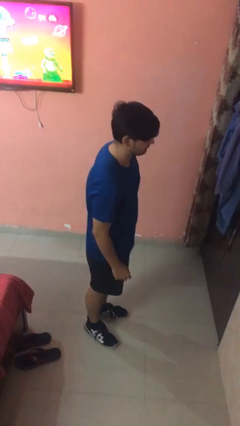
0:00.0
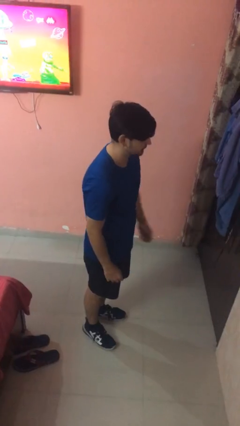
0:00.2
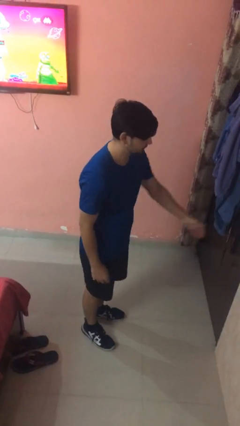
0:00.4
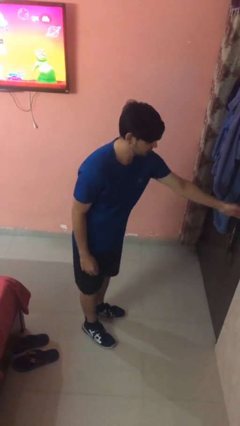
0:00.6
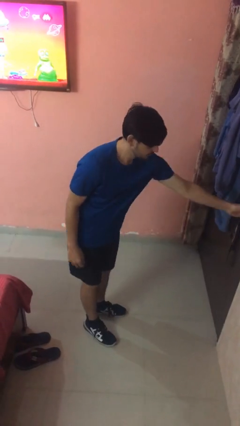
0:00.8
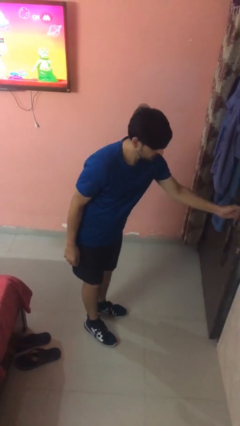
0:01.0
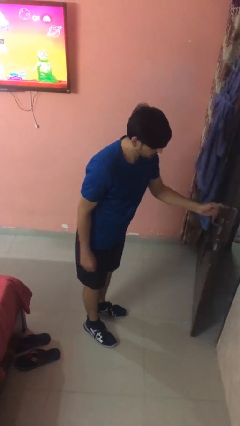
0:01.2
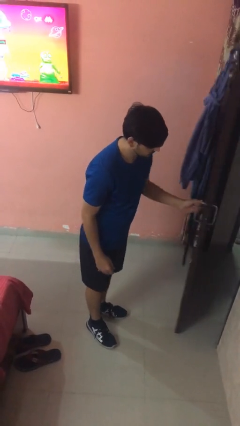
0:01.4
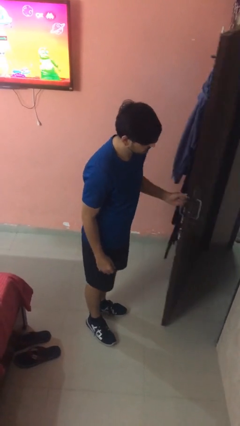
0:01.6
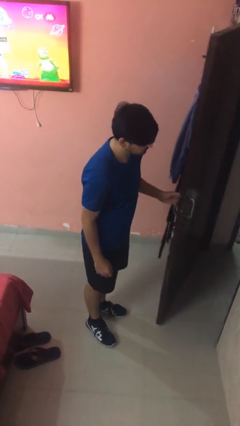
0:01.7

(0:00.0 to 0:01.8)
person opens facility door

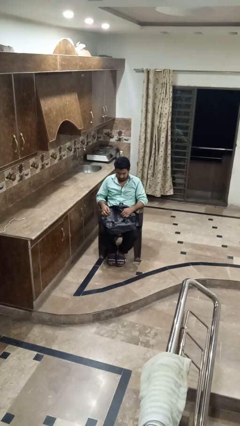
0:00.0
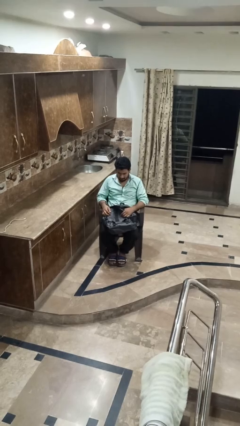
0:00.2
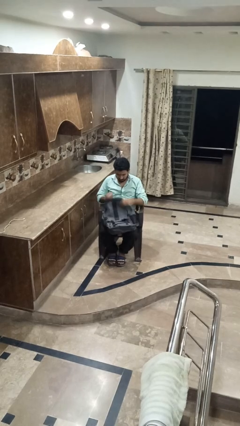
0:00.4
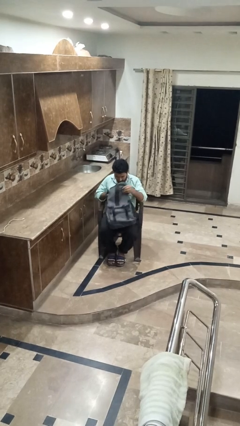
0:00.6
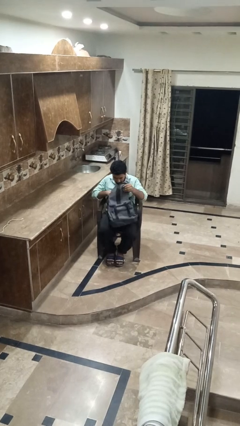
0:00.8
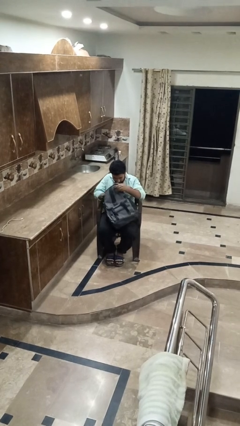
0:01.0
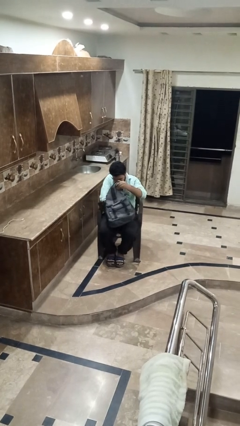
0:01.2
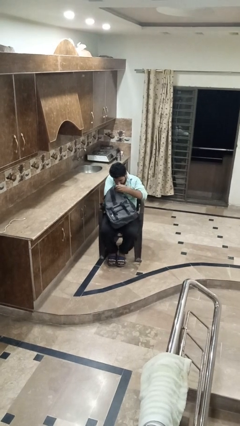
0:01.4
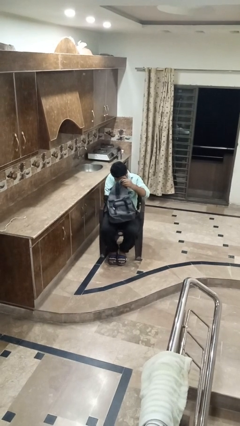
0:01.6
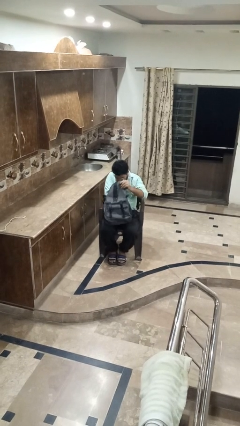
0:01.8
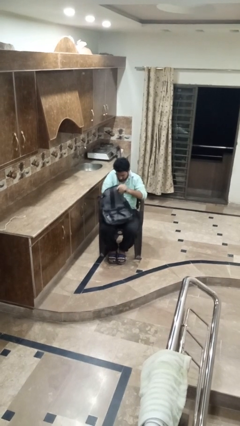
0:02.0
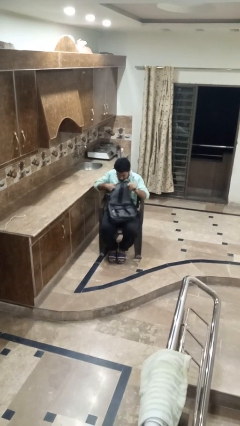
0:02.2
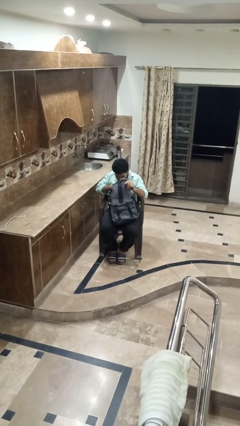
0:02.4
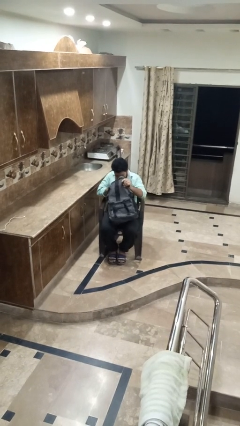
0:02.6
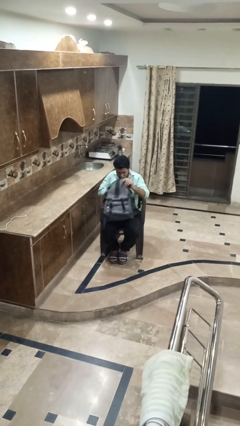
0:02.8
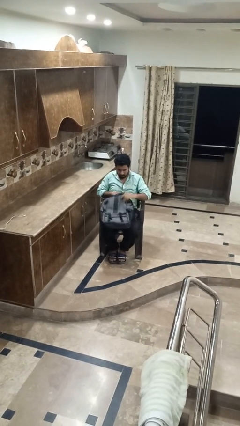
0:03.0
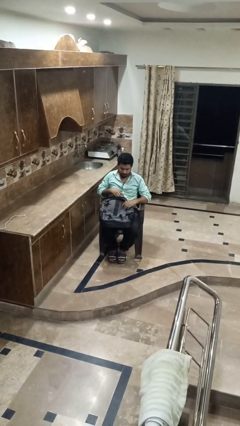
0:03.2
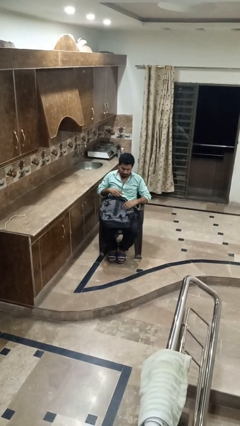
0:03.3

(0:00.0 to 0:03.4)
person searches in bag

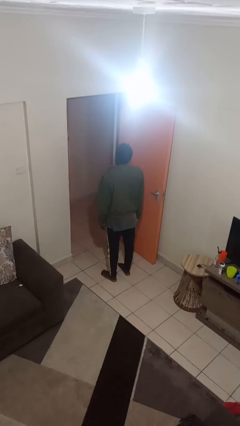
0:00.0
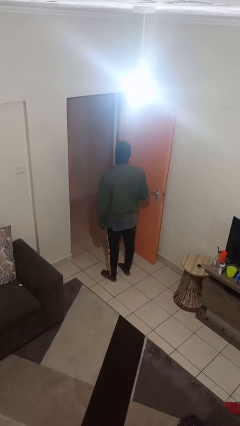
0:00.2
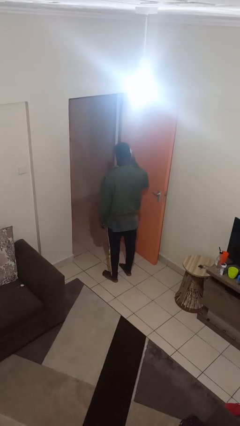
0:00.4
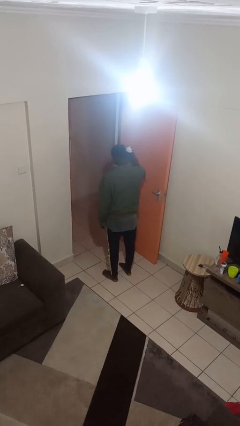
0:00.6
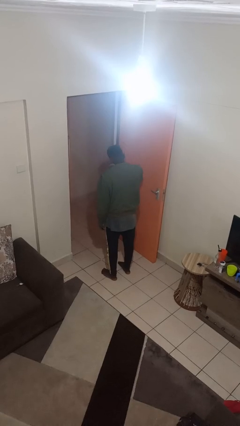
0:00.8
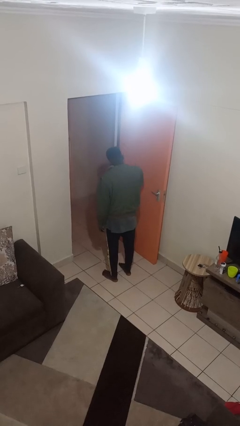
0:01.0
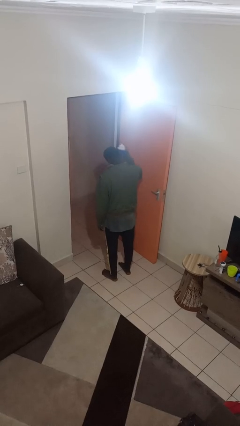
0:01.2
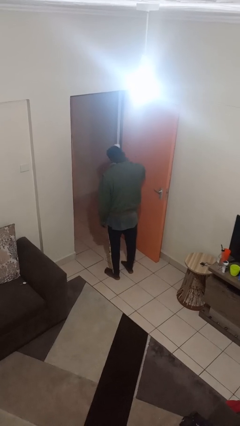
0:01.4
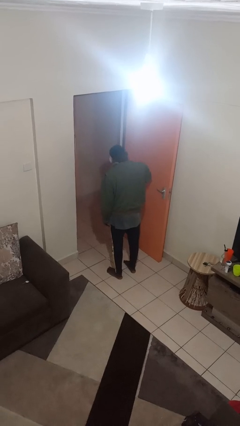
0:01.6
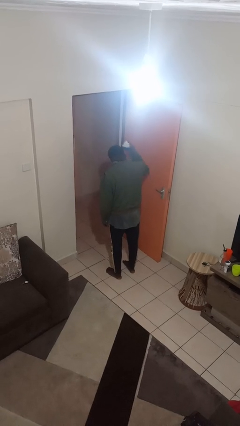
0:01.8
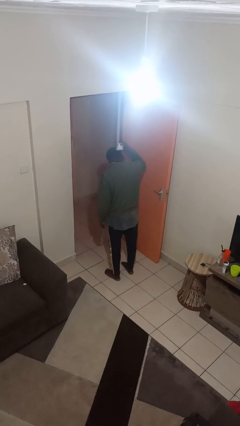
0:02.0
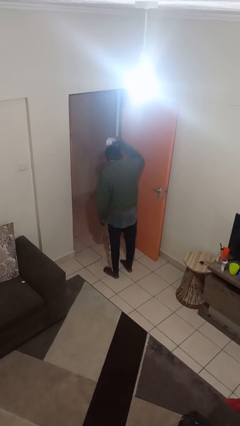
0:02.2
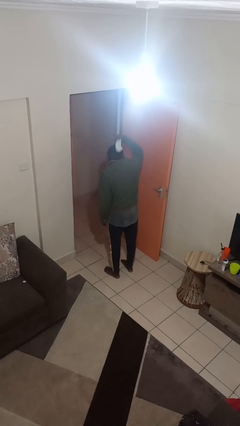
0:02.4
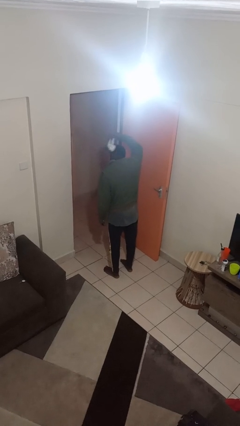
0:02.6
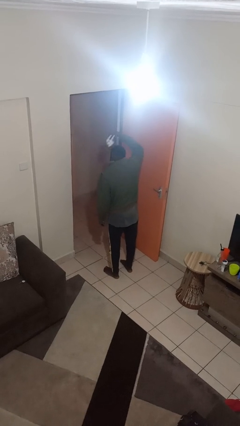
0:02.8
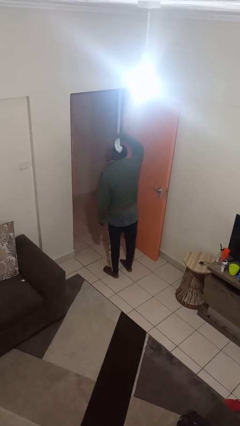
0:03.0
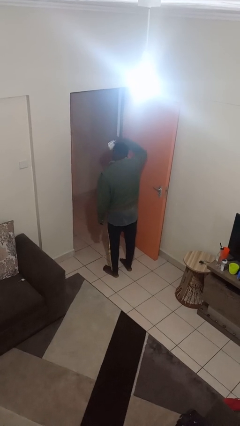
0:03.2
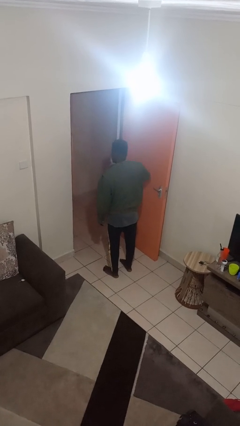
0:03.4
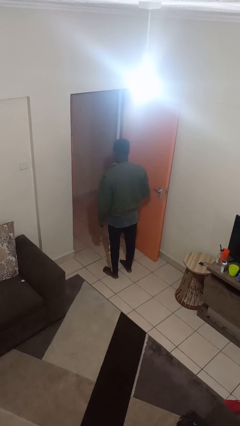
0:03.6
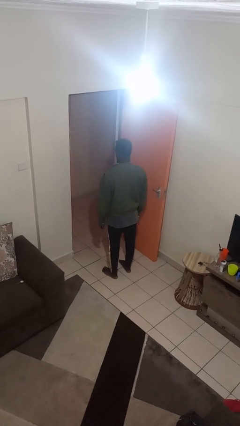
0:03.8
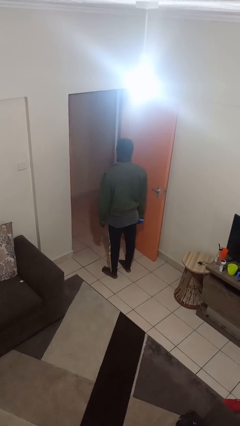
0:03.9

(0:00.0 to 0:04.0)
person brushes hair

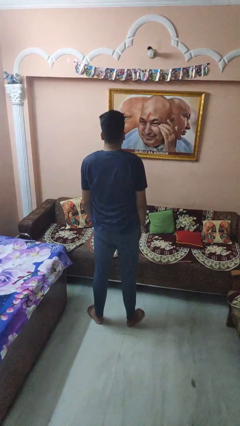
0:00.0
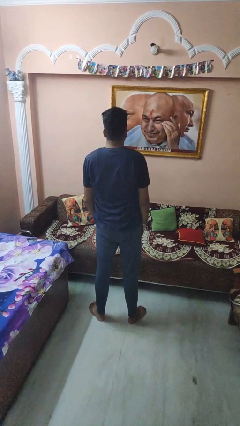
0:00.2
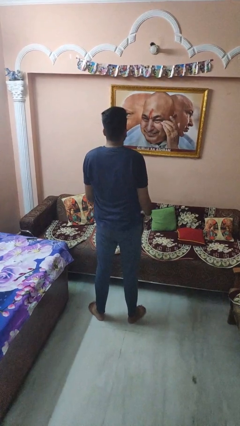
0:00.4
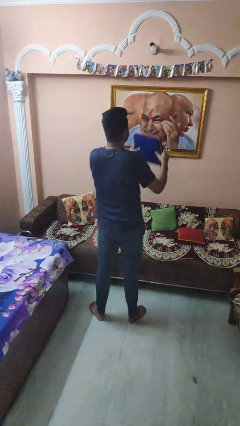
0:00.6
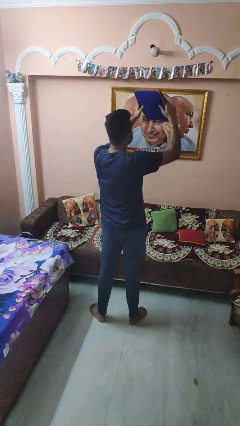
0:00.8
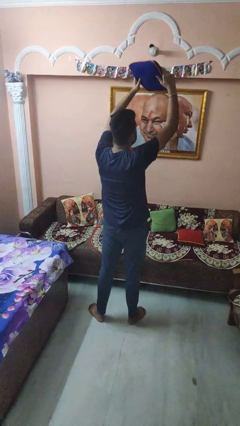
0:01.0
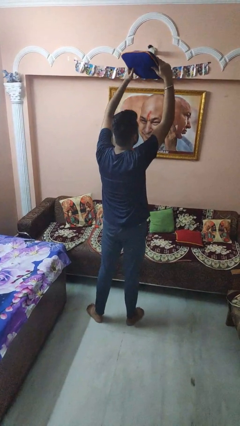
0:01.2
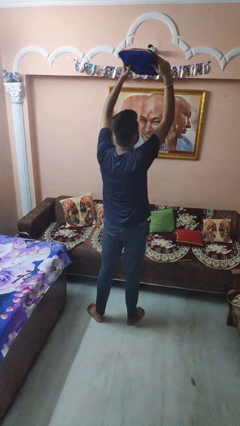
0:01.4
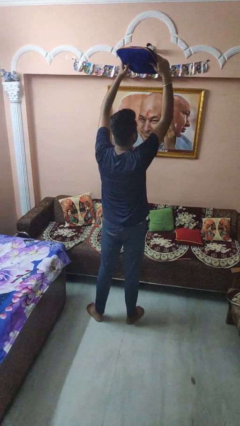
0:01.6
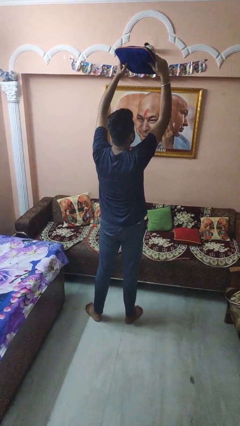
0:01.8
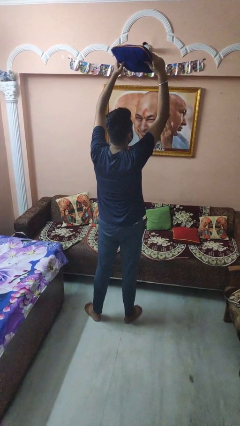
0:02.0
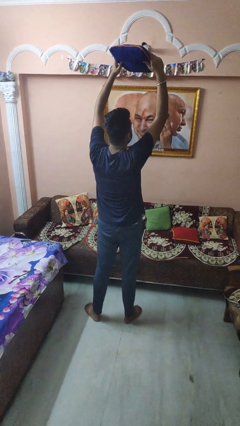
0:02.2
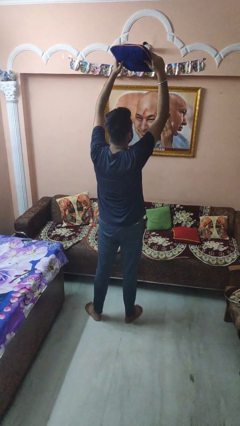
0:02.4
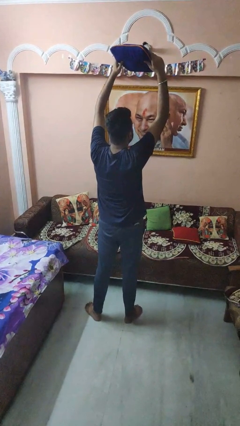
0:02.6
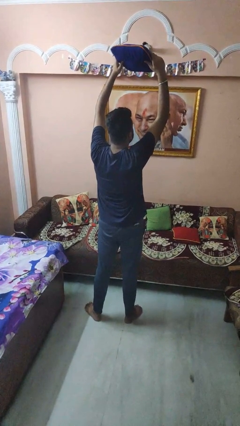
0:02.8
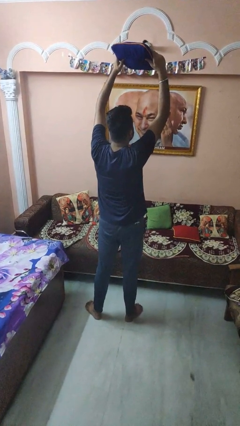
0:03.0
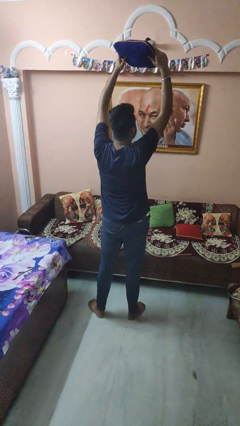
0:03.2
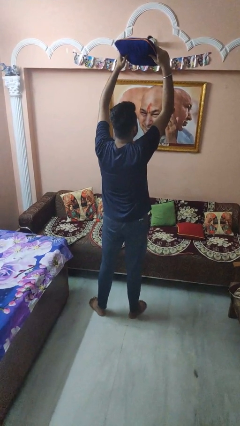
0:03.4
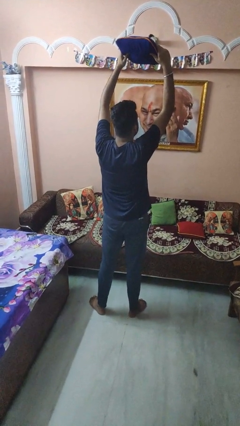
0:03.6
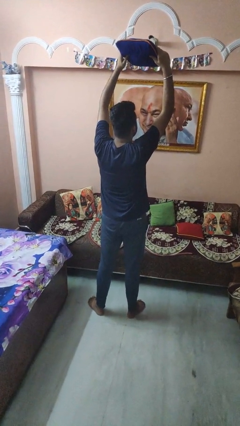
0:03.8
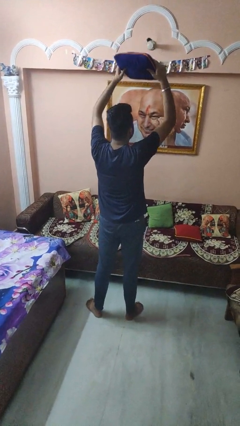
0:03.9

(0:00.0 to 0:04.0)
person holds object above head

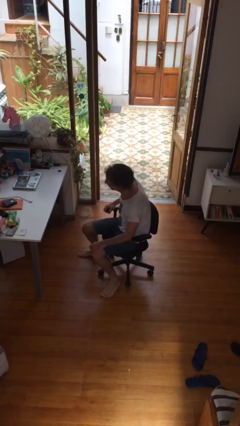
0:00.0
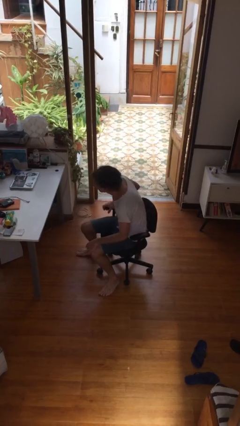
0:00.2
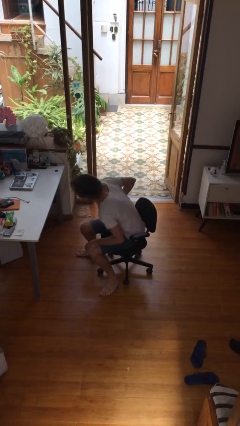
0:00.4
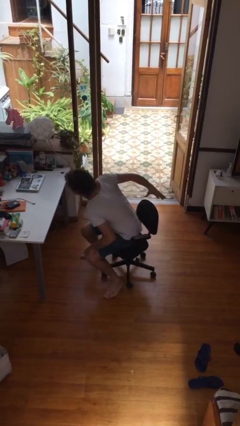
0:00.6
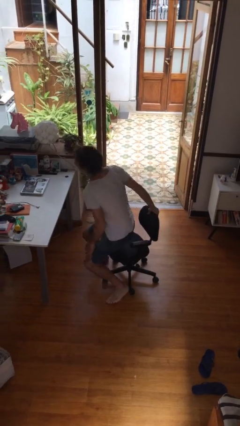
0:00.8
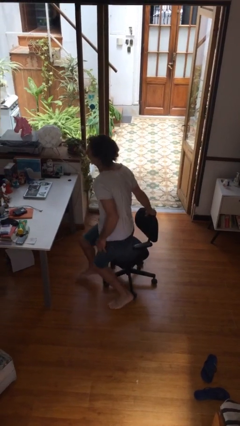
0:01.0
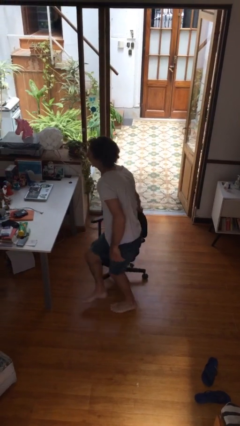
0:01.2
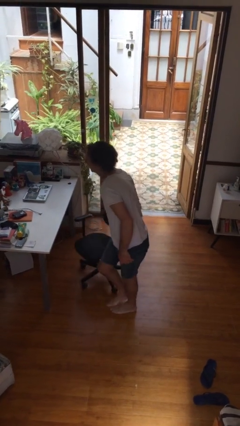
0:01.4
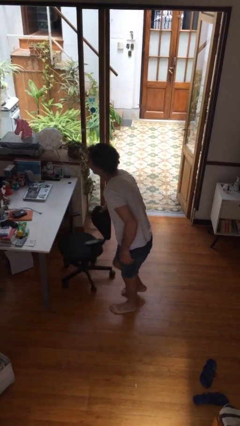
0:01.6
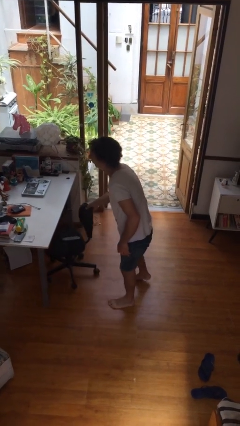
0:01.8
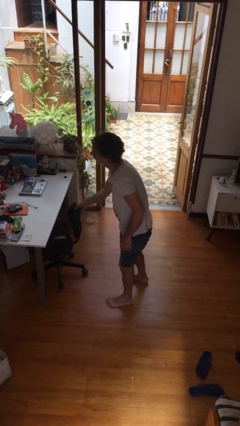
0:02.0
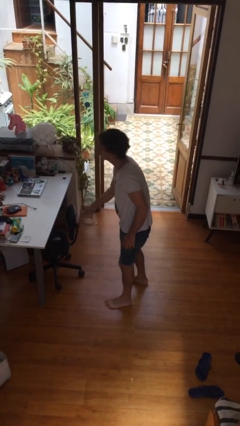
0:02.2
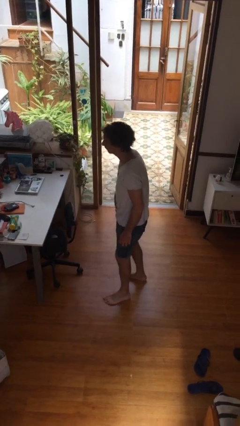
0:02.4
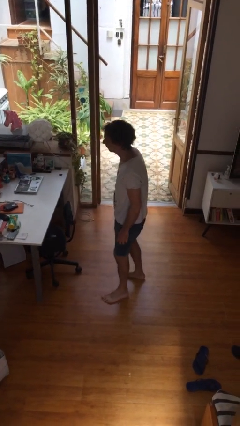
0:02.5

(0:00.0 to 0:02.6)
person stands up

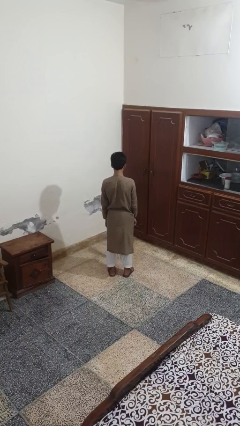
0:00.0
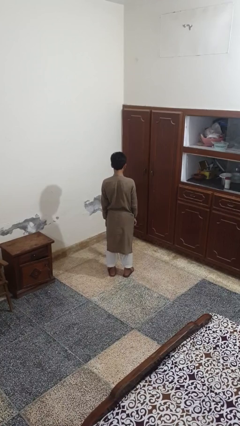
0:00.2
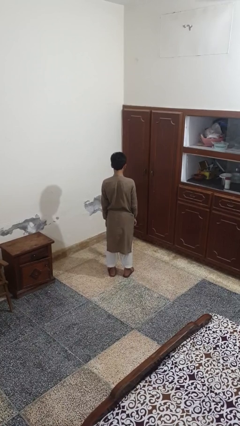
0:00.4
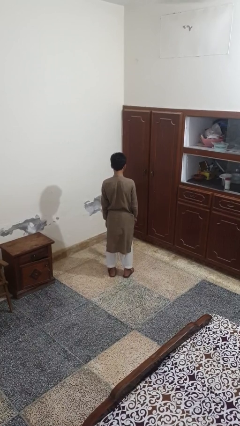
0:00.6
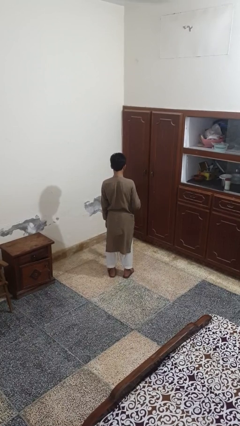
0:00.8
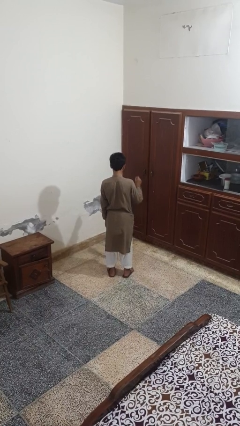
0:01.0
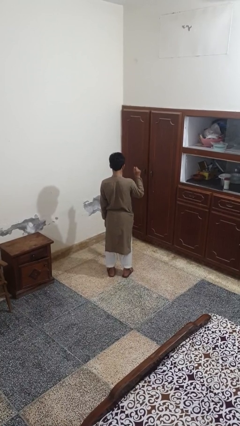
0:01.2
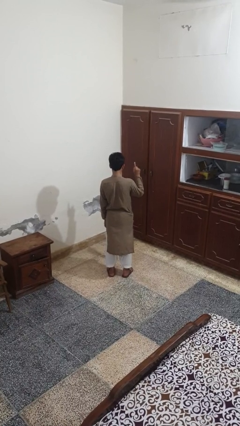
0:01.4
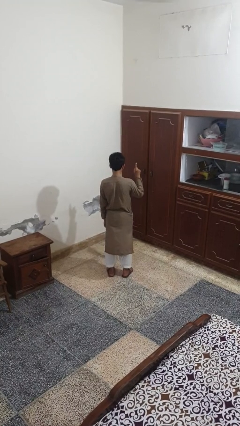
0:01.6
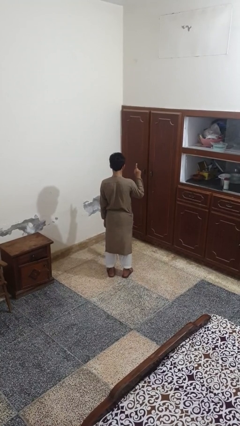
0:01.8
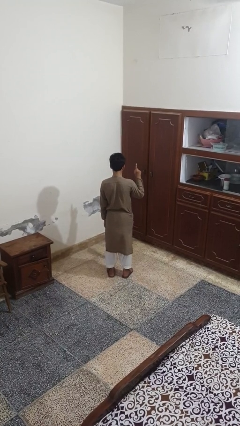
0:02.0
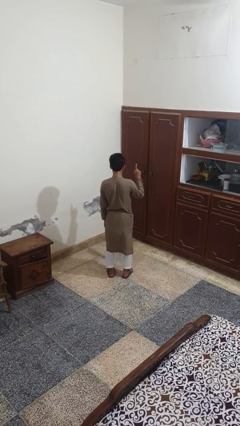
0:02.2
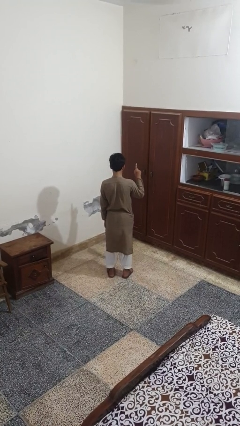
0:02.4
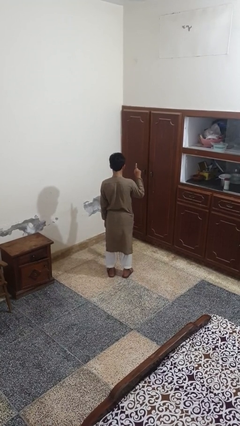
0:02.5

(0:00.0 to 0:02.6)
person gestures number one
